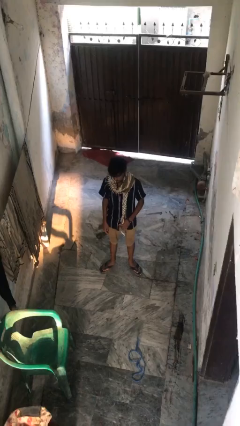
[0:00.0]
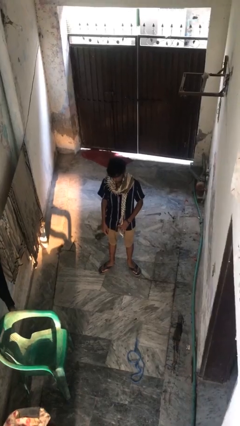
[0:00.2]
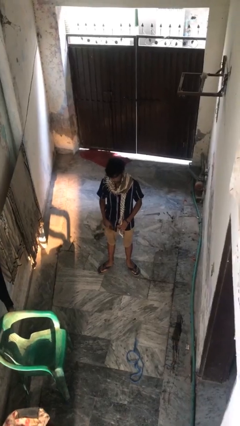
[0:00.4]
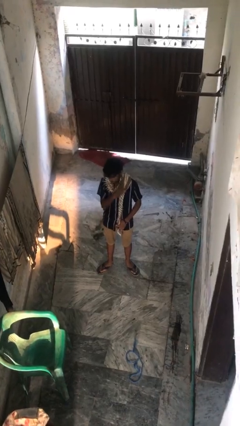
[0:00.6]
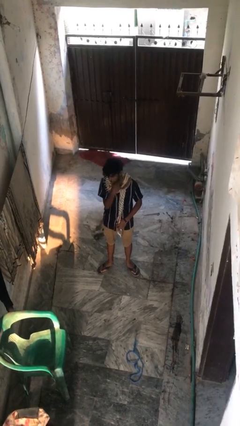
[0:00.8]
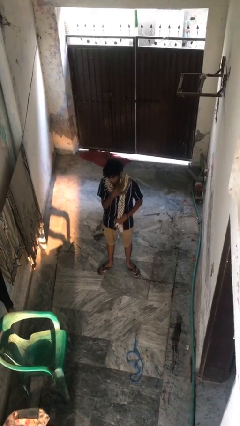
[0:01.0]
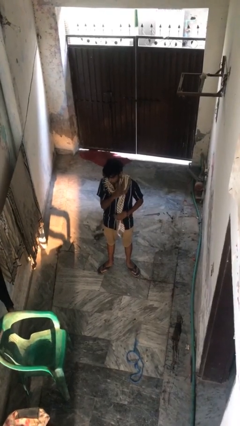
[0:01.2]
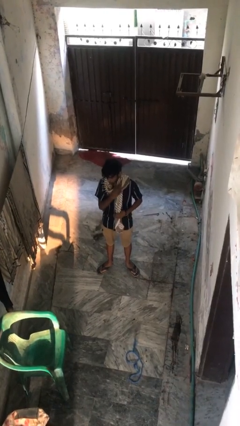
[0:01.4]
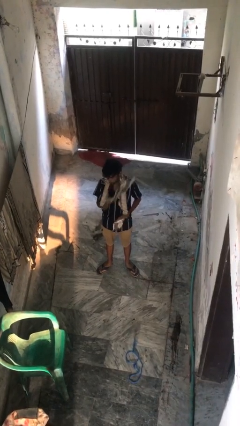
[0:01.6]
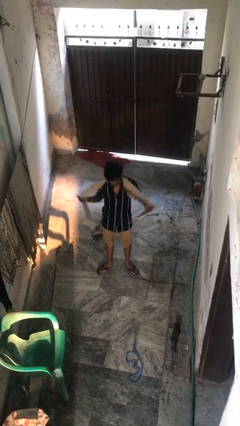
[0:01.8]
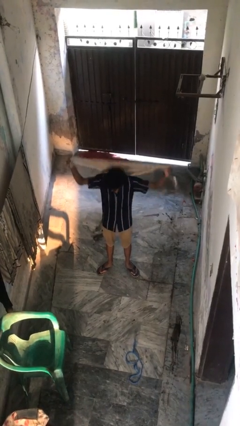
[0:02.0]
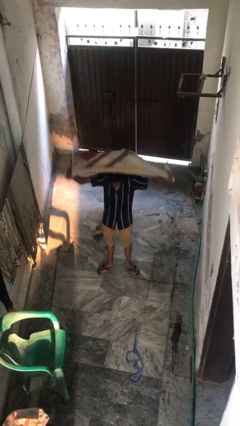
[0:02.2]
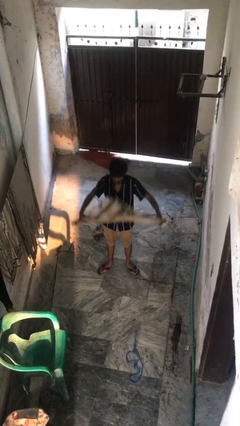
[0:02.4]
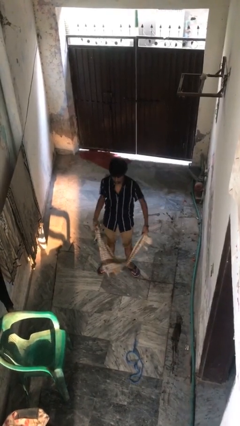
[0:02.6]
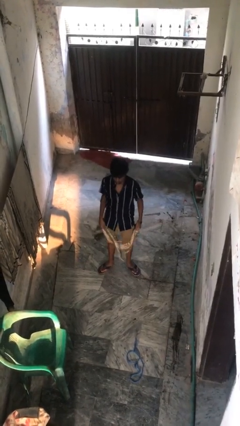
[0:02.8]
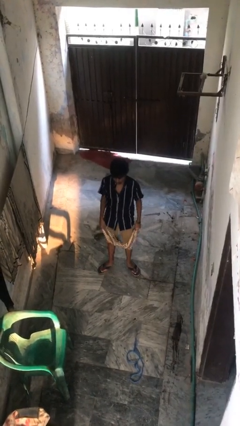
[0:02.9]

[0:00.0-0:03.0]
person takes off scarf

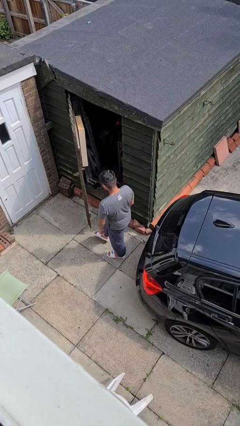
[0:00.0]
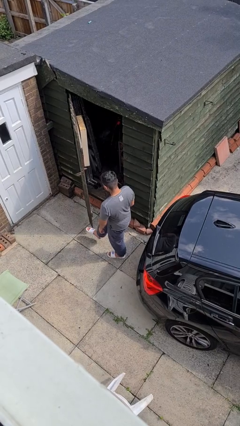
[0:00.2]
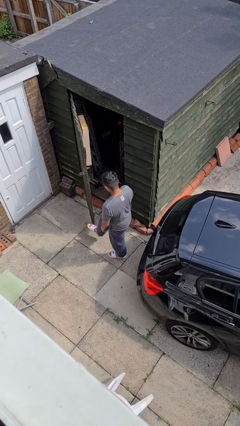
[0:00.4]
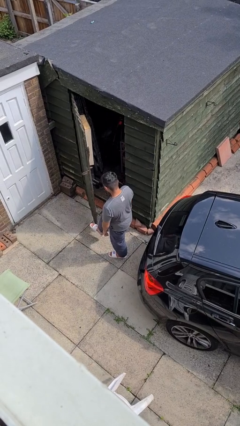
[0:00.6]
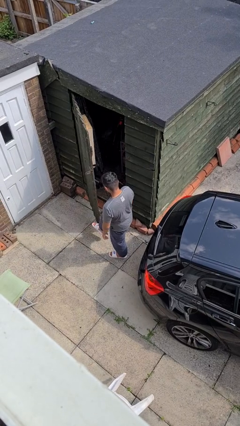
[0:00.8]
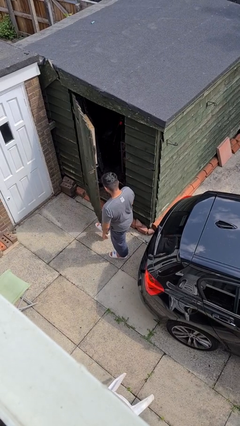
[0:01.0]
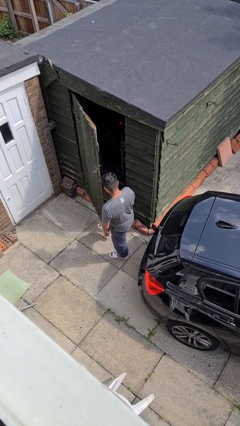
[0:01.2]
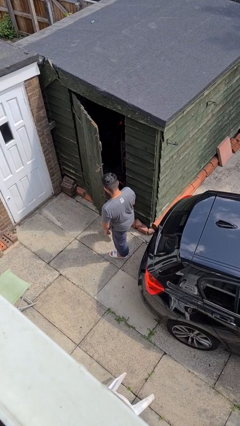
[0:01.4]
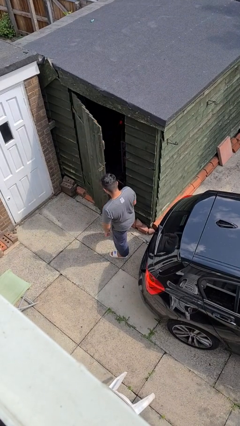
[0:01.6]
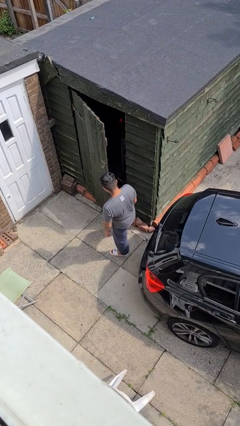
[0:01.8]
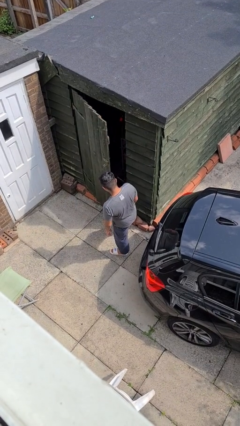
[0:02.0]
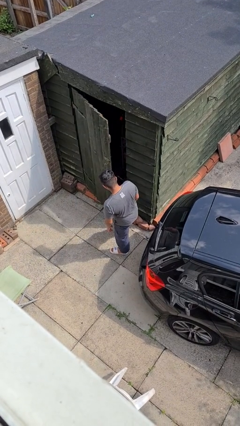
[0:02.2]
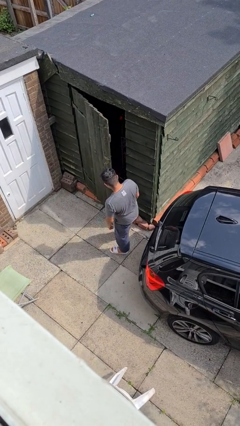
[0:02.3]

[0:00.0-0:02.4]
person closes door with foot

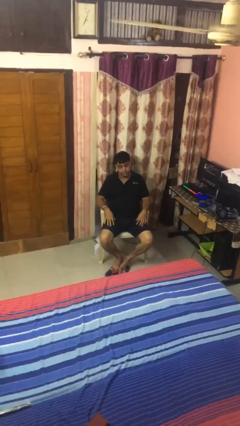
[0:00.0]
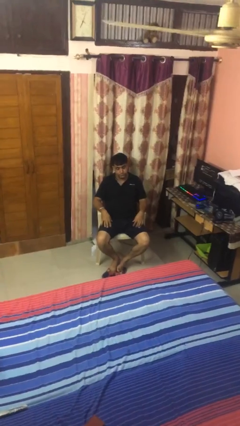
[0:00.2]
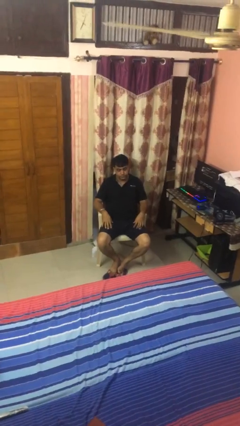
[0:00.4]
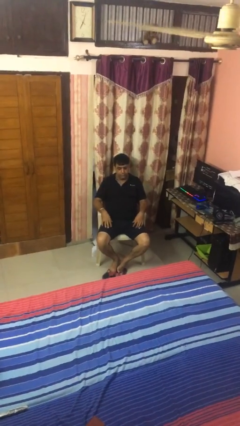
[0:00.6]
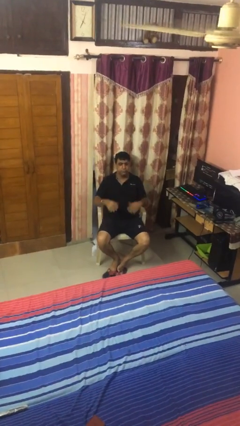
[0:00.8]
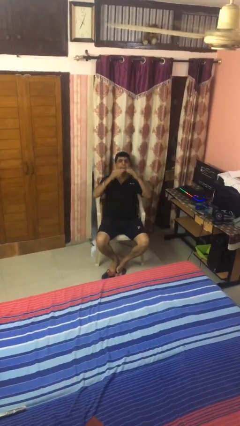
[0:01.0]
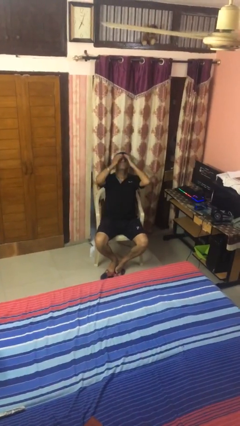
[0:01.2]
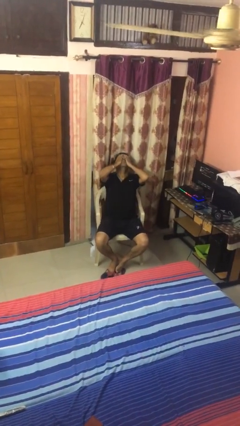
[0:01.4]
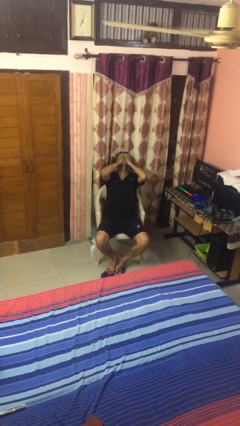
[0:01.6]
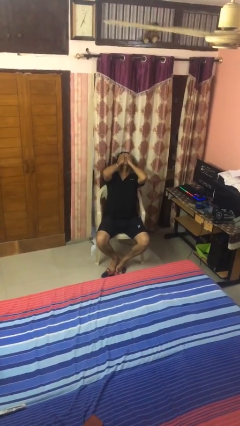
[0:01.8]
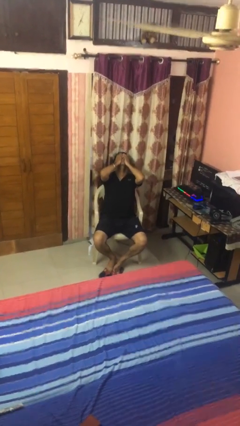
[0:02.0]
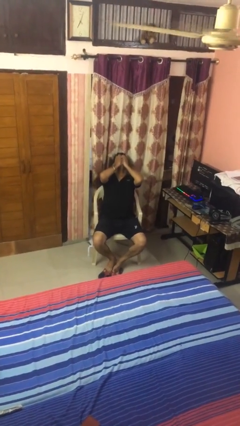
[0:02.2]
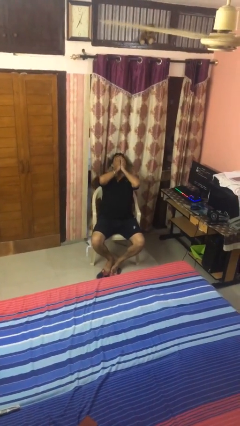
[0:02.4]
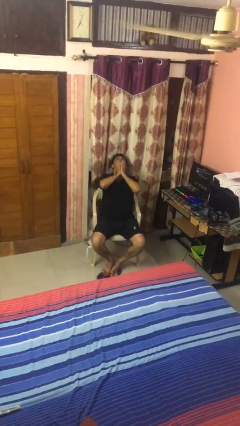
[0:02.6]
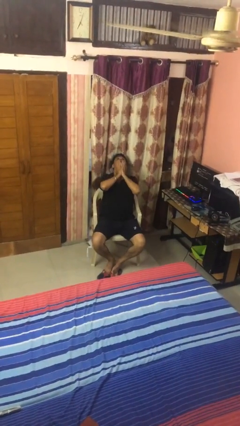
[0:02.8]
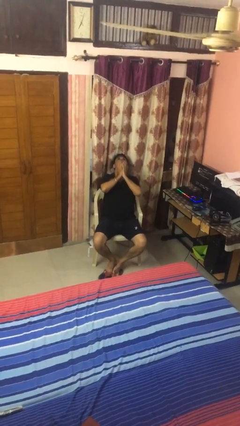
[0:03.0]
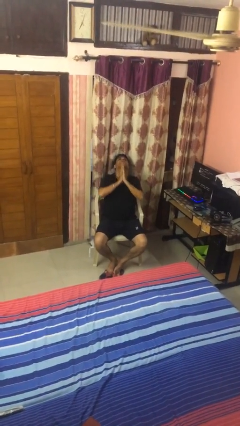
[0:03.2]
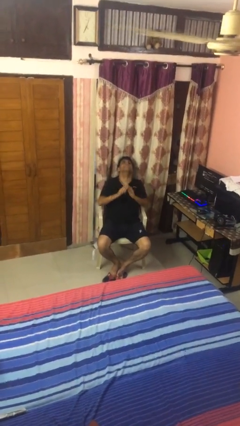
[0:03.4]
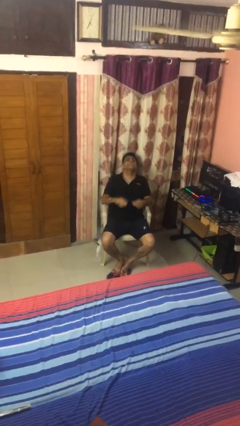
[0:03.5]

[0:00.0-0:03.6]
person covers face with hands

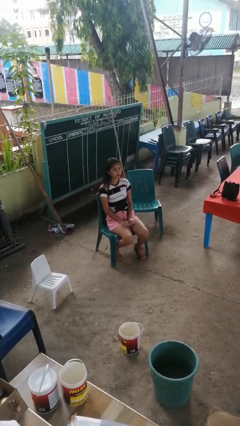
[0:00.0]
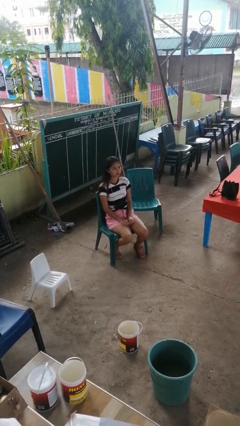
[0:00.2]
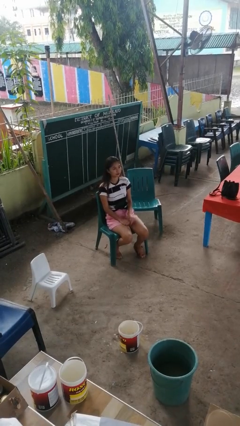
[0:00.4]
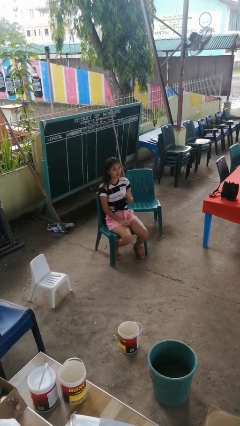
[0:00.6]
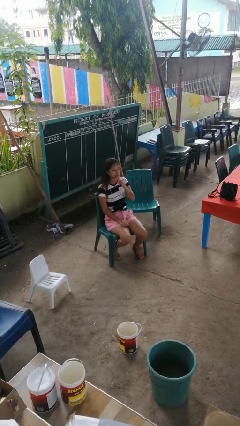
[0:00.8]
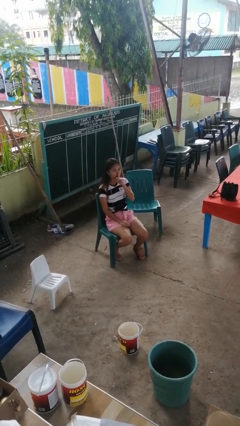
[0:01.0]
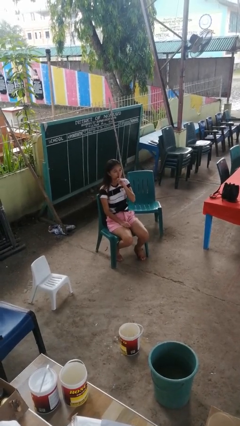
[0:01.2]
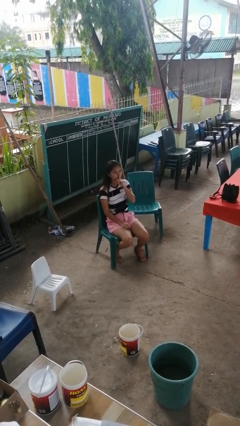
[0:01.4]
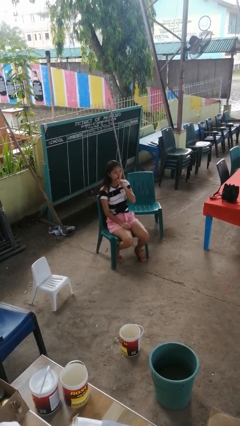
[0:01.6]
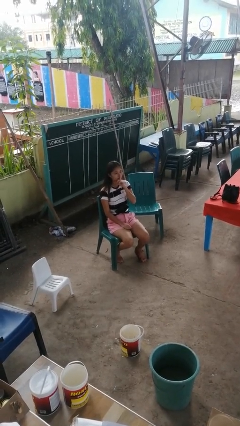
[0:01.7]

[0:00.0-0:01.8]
person gestures be quiet

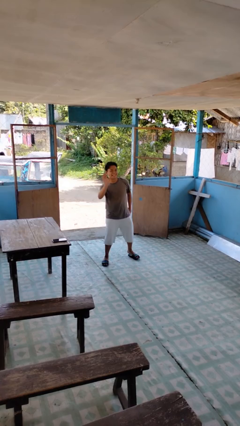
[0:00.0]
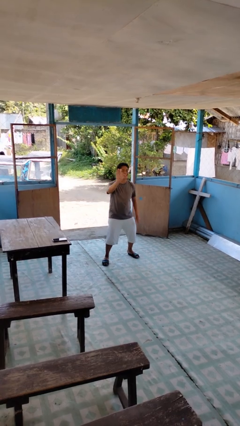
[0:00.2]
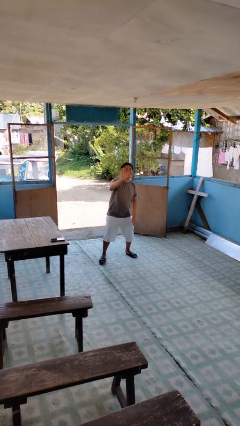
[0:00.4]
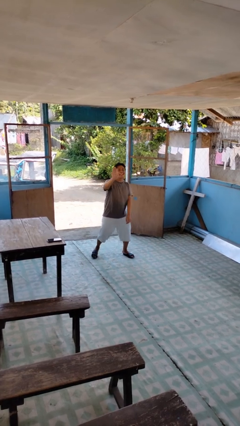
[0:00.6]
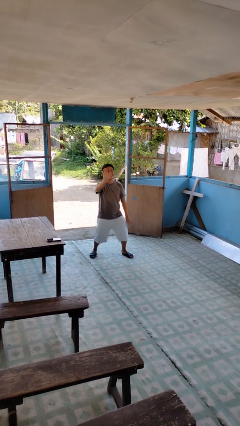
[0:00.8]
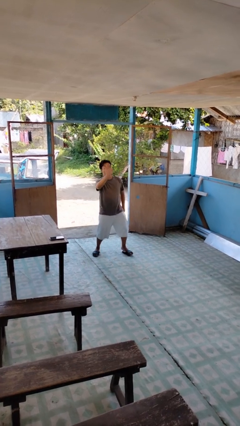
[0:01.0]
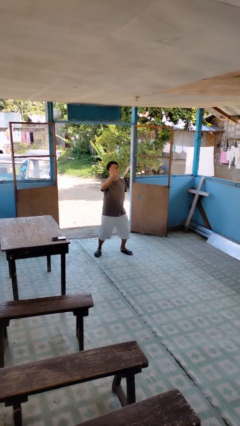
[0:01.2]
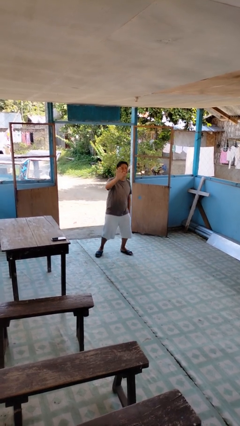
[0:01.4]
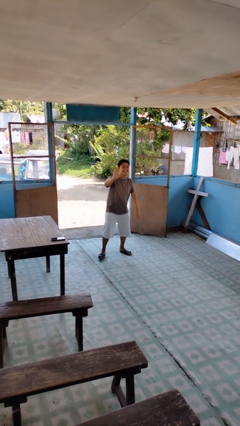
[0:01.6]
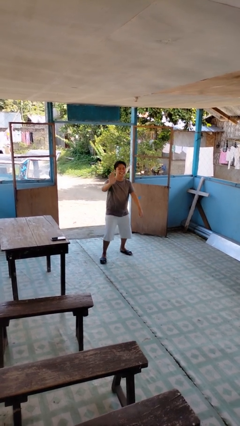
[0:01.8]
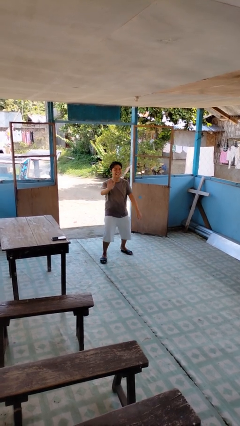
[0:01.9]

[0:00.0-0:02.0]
person dances in place

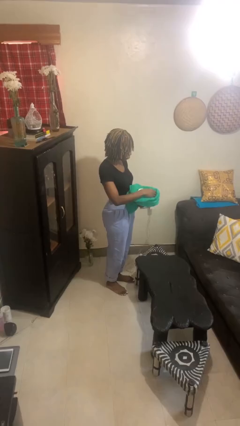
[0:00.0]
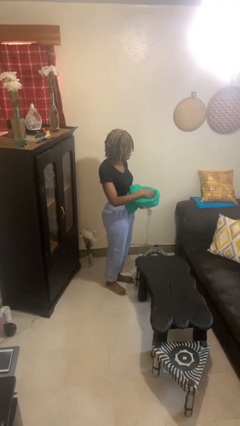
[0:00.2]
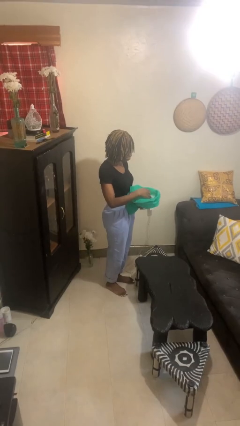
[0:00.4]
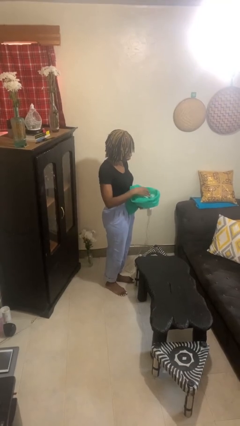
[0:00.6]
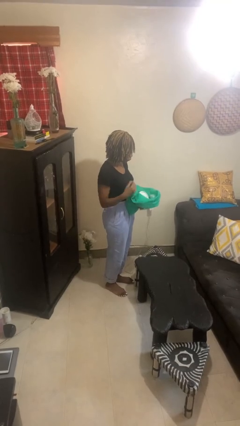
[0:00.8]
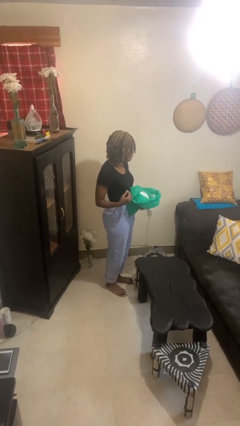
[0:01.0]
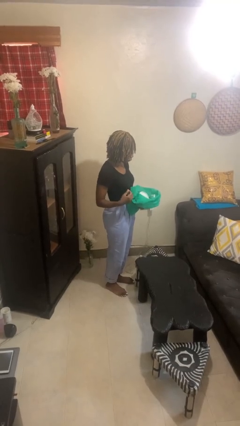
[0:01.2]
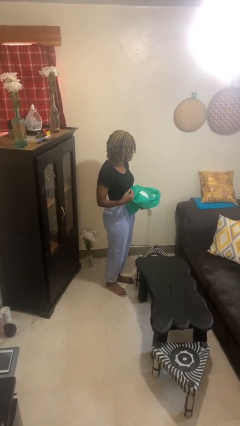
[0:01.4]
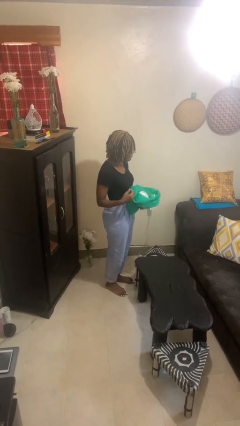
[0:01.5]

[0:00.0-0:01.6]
person puts object into bag

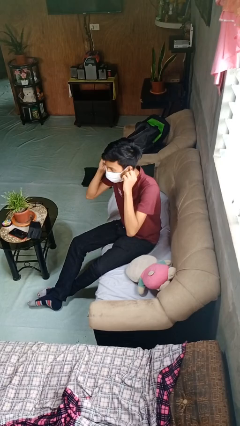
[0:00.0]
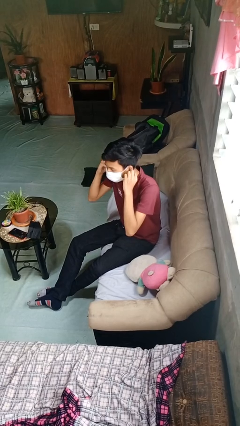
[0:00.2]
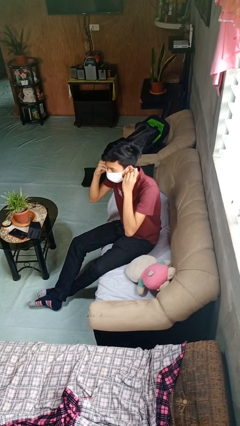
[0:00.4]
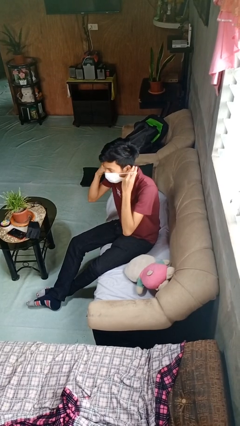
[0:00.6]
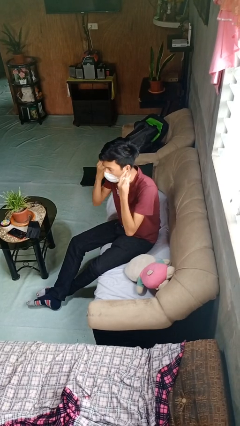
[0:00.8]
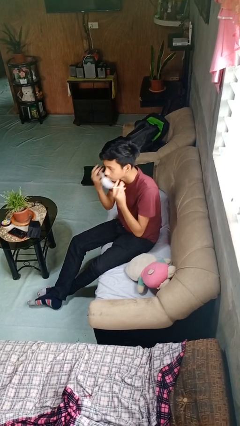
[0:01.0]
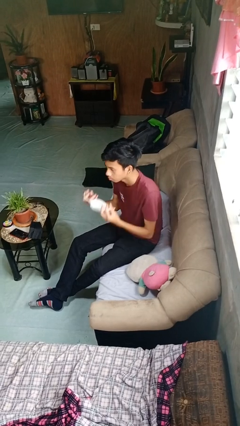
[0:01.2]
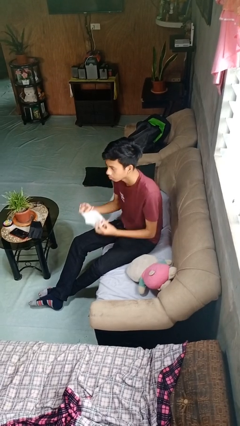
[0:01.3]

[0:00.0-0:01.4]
person takes off facemask

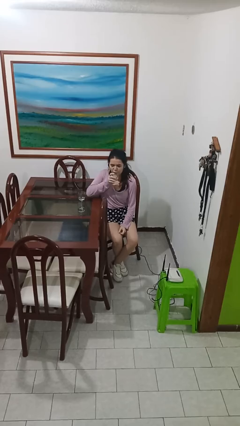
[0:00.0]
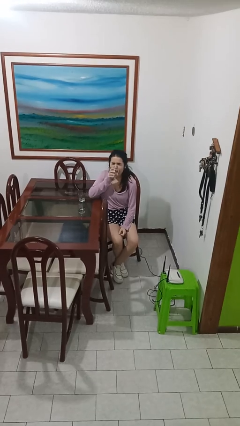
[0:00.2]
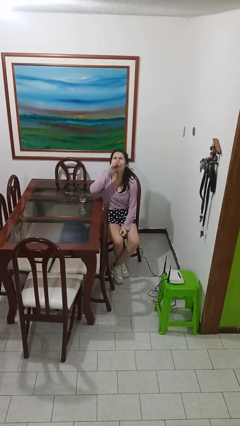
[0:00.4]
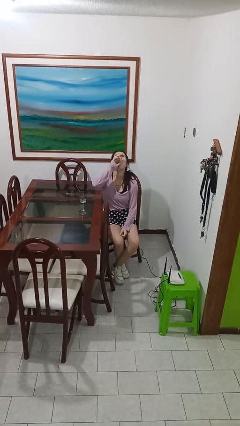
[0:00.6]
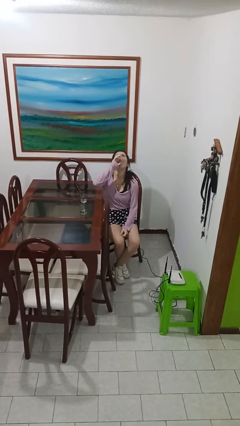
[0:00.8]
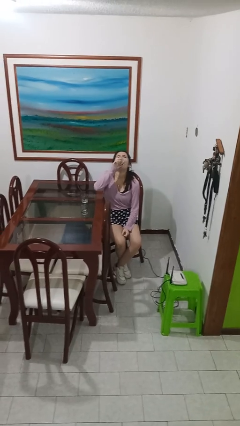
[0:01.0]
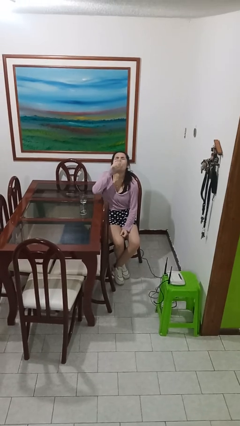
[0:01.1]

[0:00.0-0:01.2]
person drinks from shotglass
